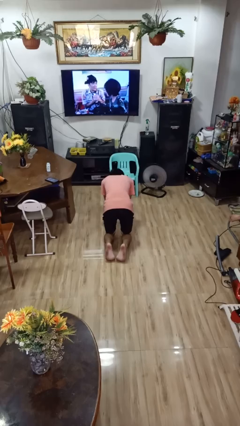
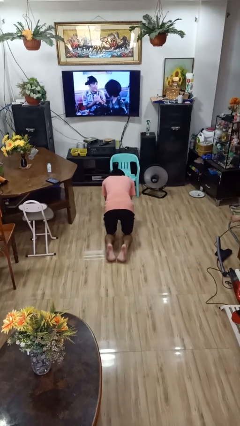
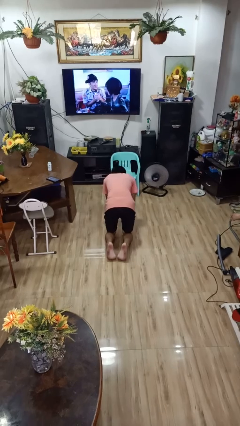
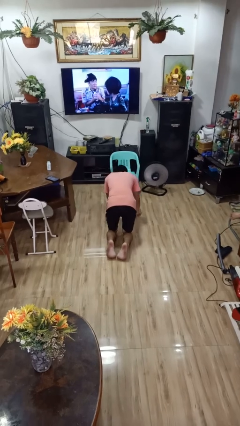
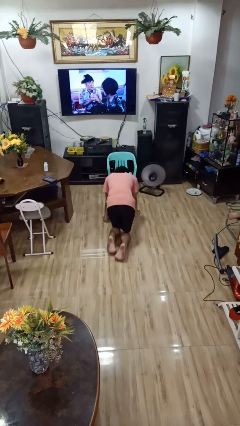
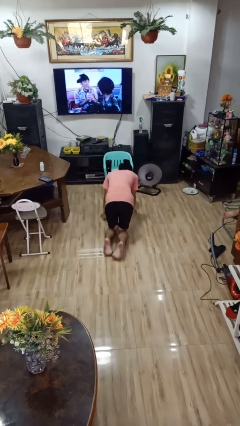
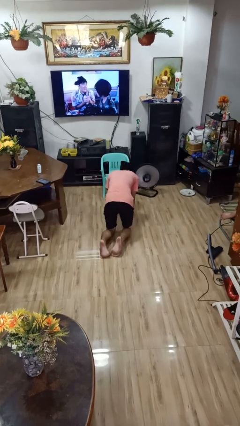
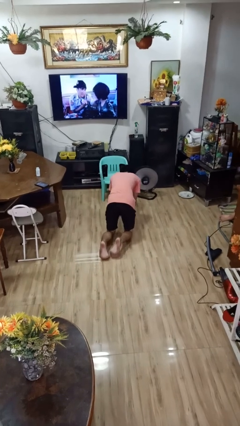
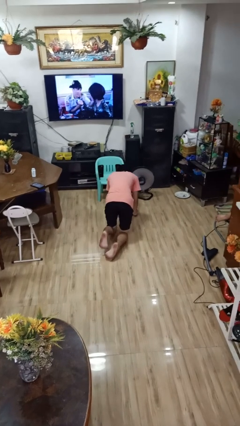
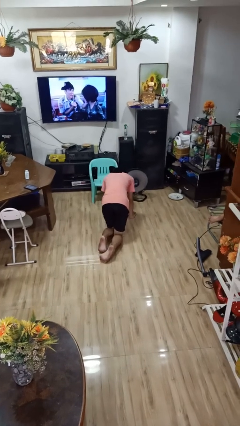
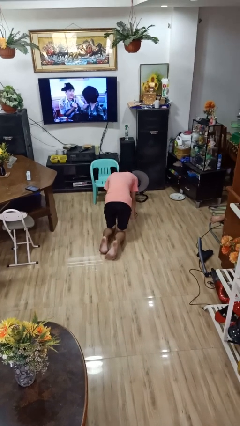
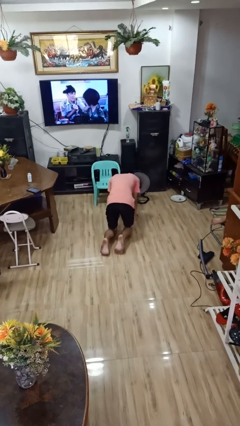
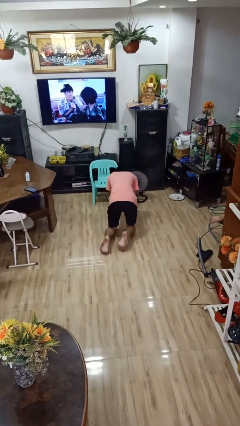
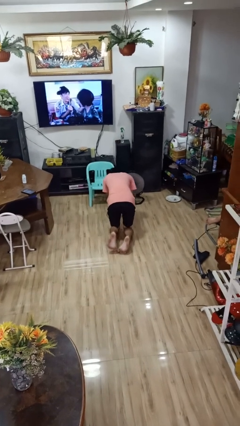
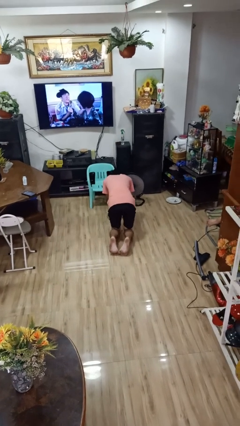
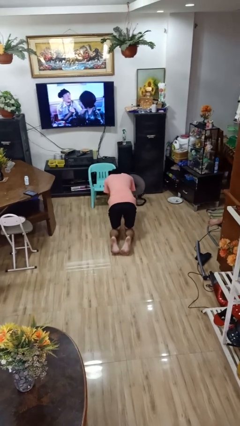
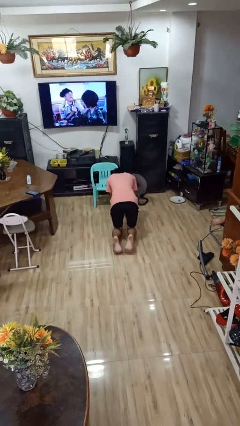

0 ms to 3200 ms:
person crawls

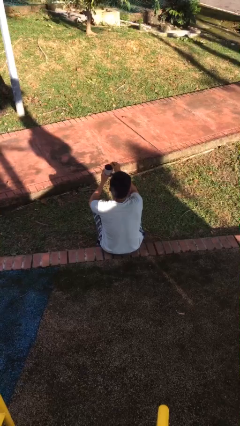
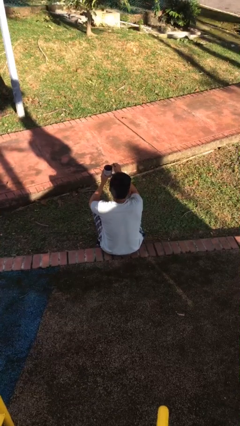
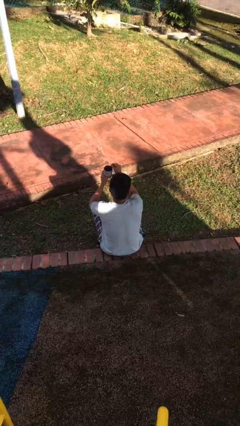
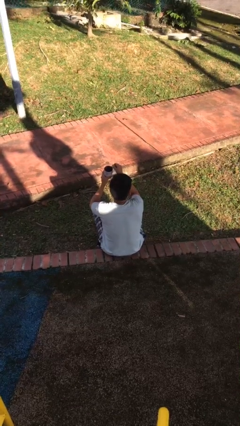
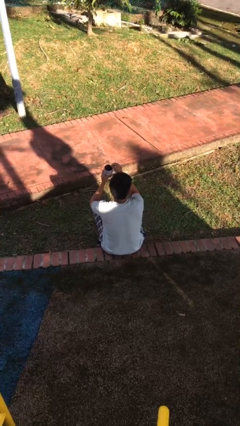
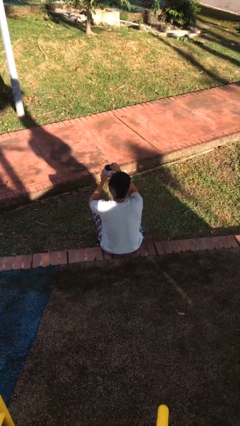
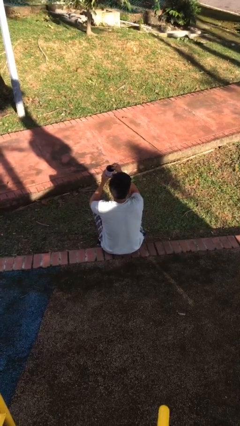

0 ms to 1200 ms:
person stirs mug

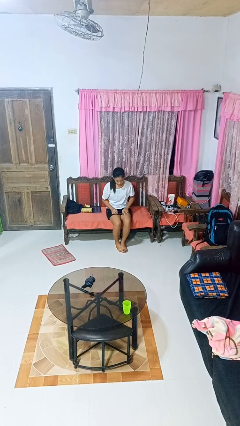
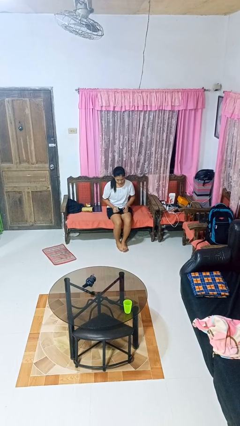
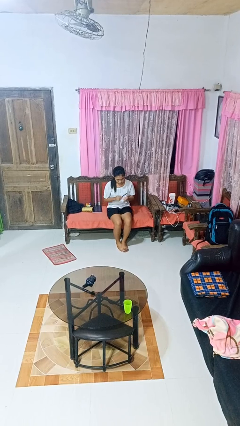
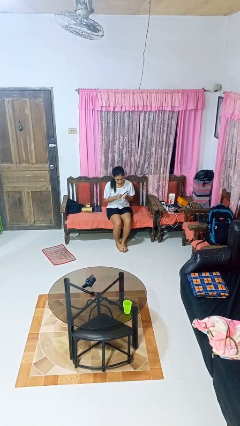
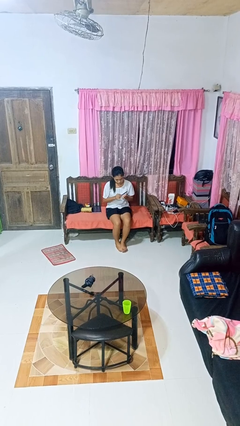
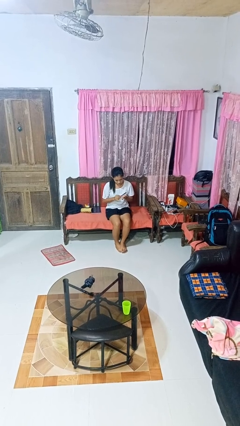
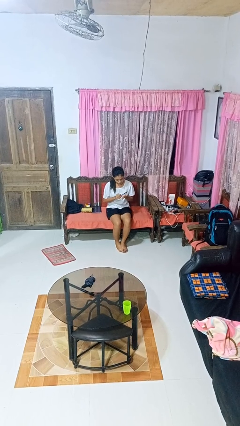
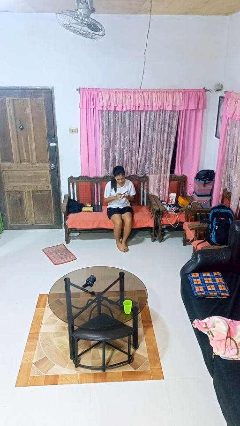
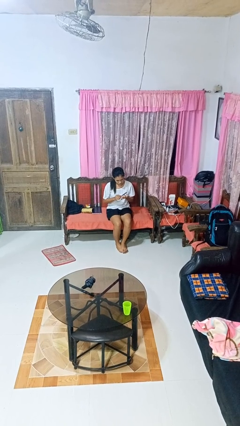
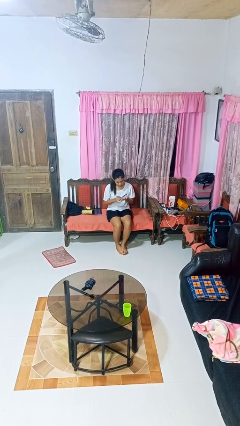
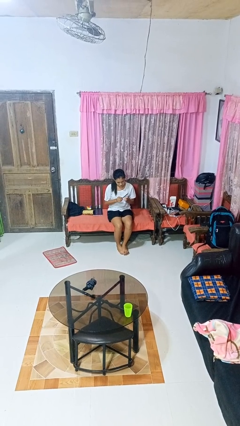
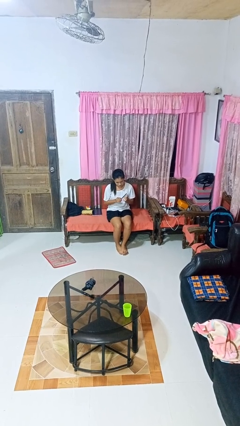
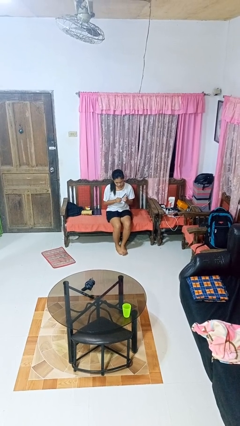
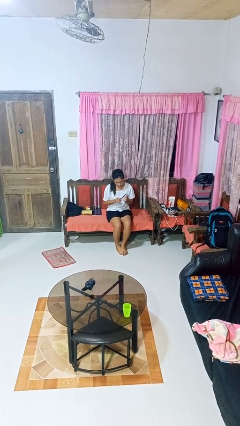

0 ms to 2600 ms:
person files fingernails

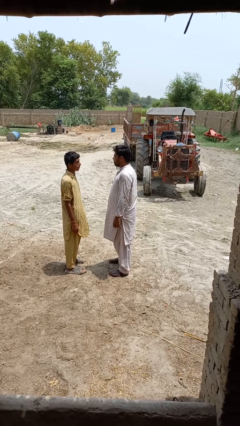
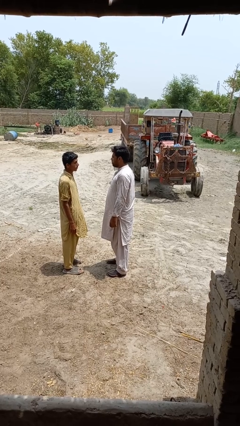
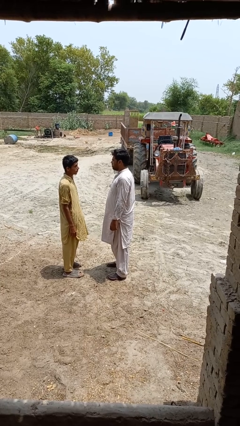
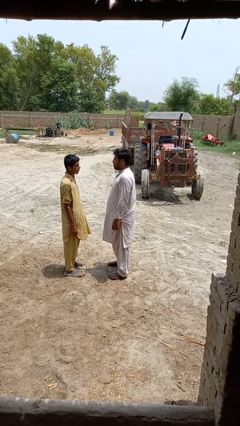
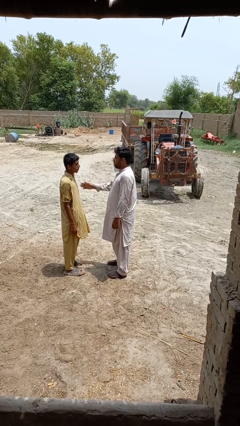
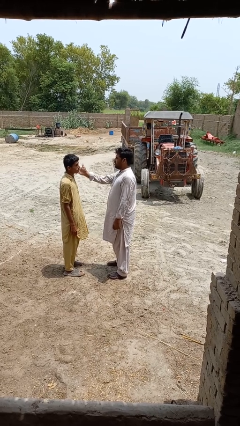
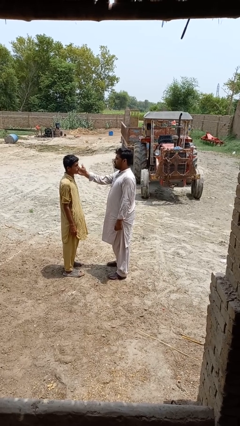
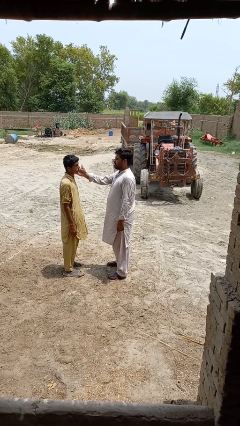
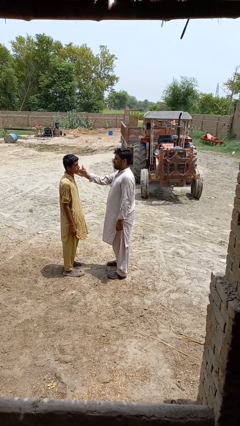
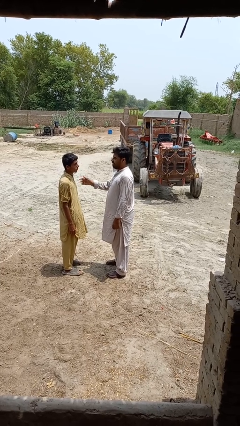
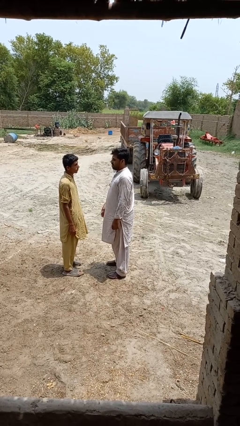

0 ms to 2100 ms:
person touches face of person

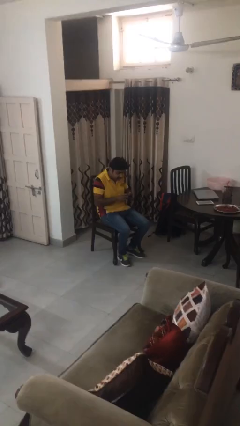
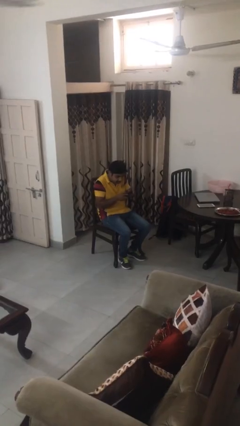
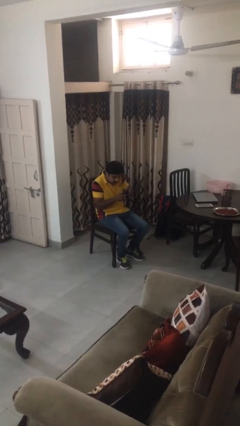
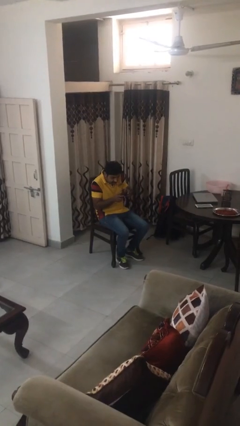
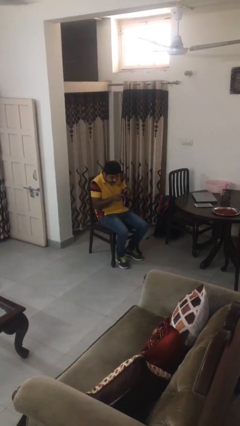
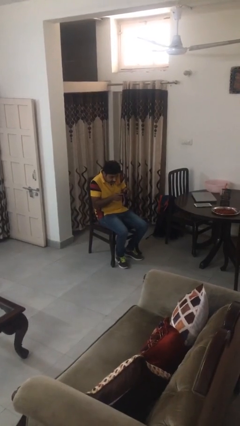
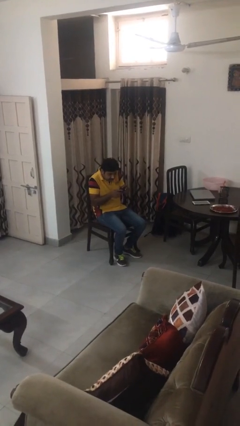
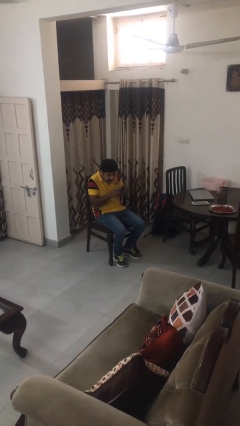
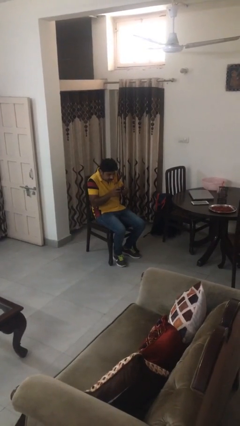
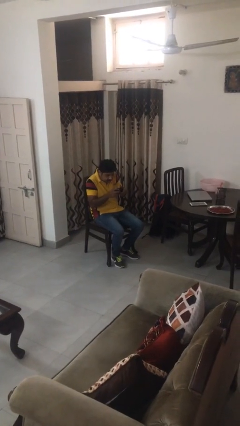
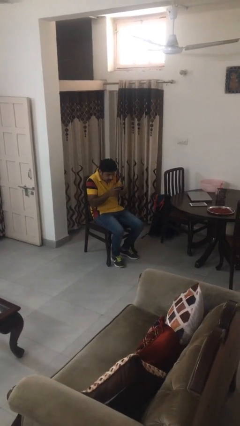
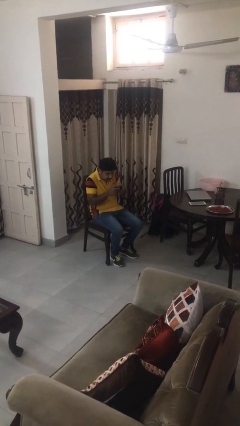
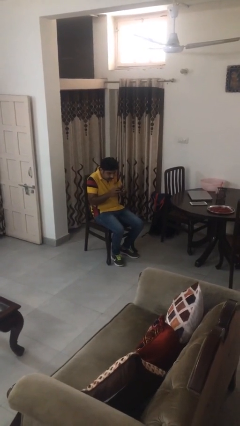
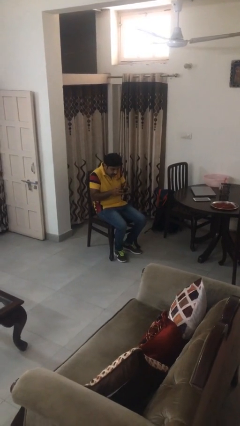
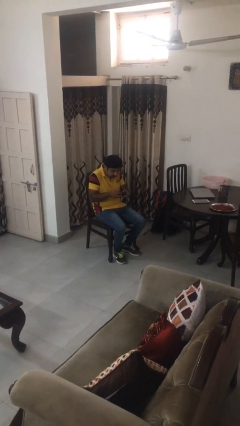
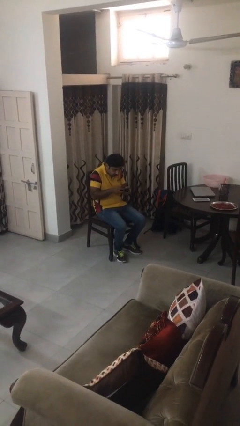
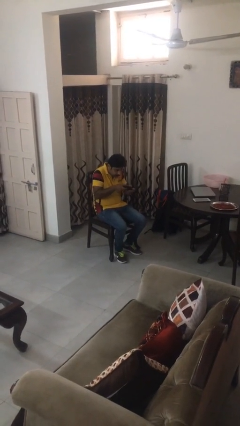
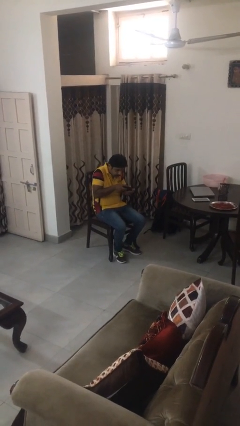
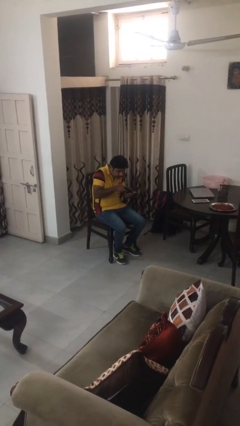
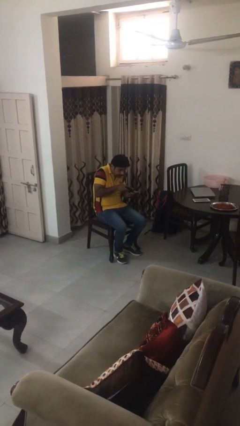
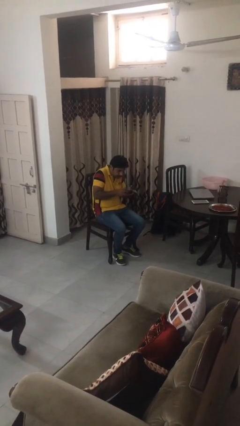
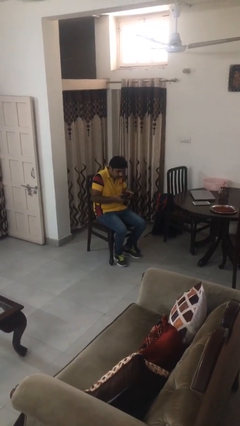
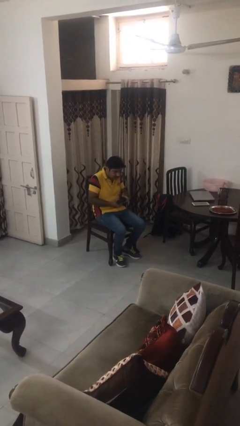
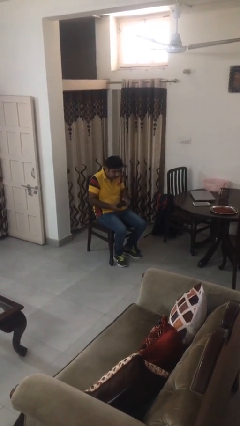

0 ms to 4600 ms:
person interacts with handheld game

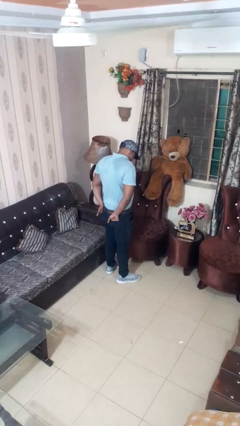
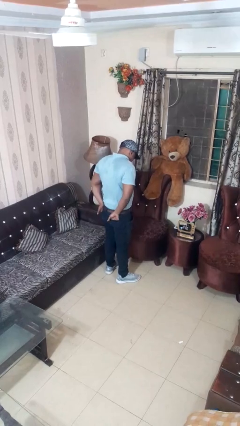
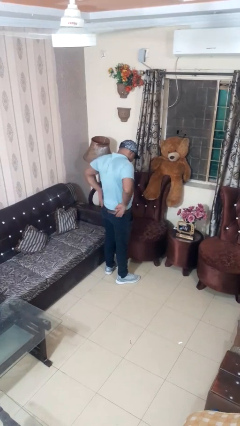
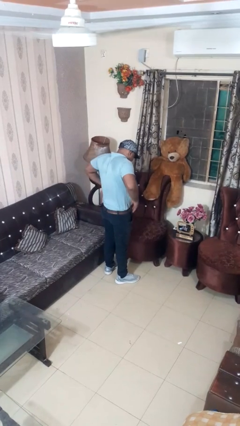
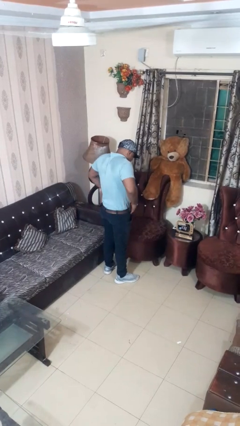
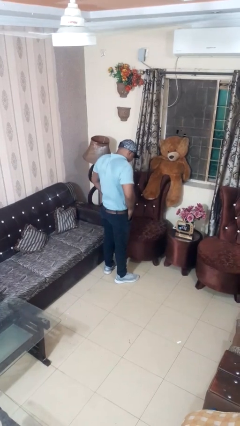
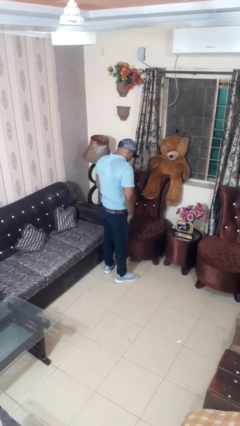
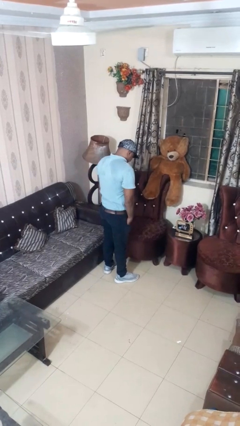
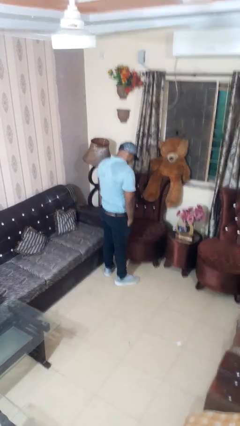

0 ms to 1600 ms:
person puts hands in back pockets

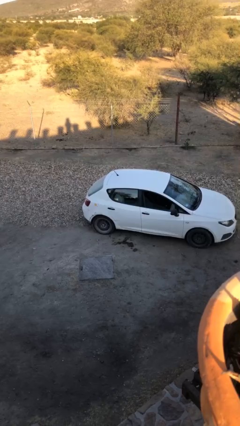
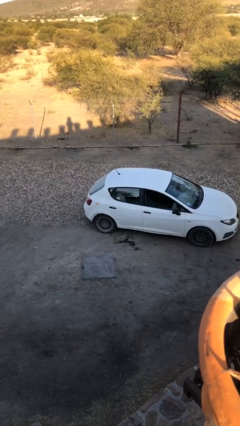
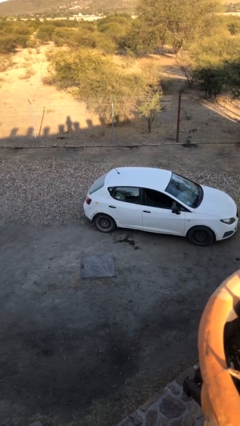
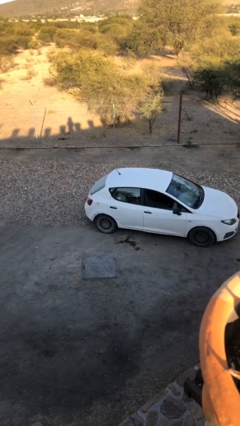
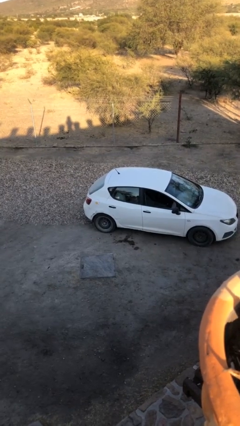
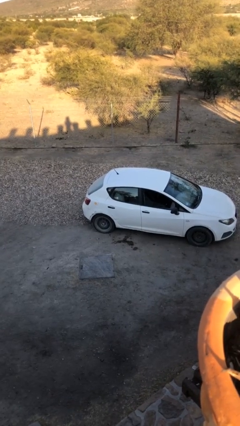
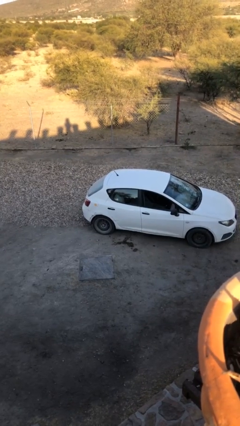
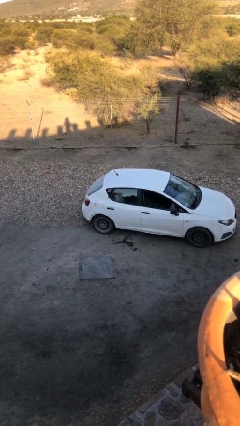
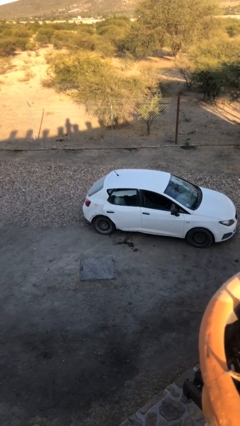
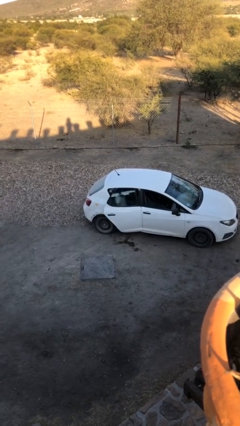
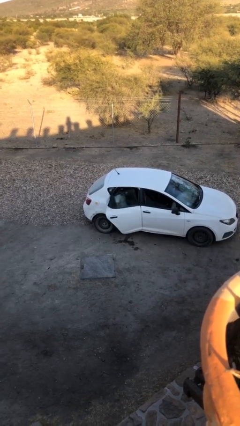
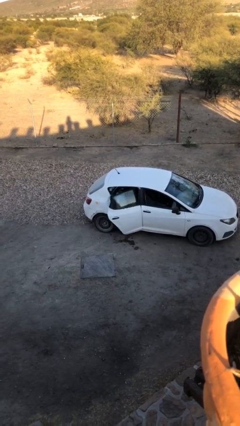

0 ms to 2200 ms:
person opens car door
